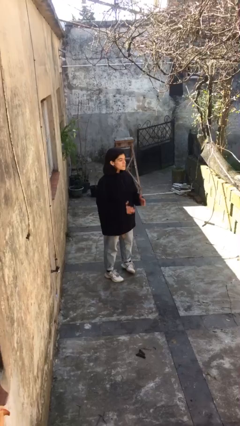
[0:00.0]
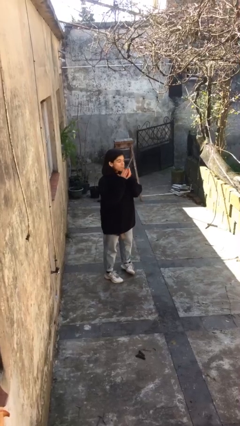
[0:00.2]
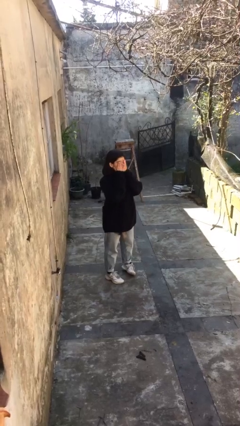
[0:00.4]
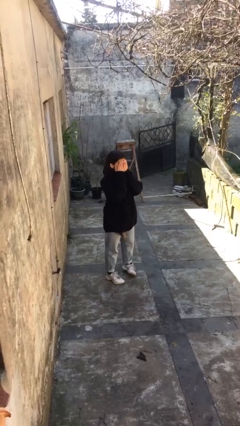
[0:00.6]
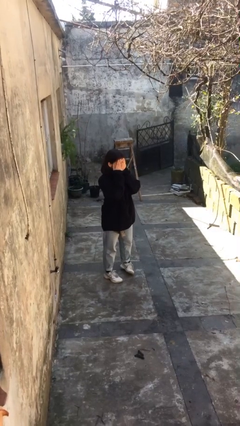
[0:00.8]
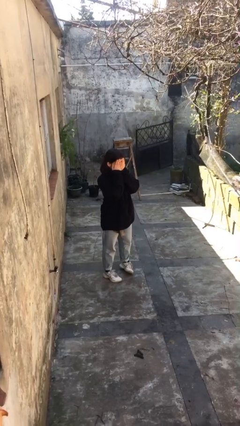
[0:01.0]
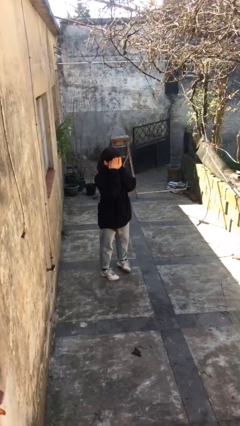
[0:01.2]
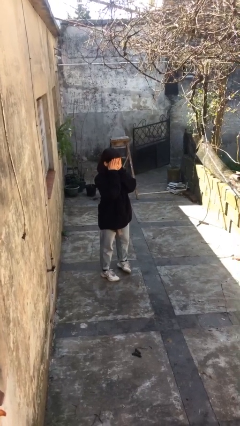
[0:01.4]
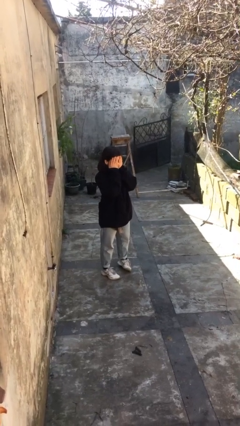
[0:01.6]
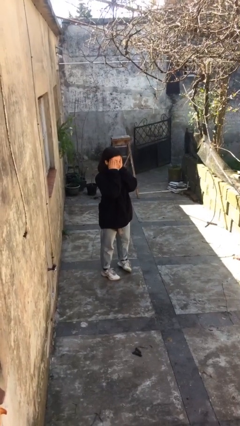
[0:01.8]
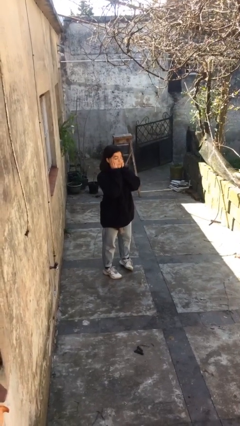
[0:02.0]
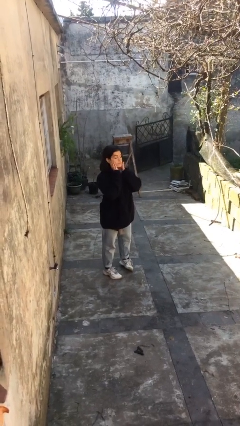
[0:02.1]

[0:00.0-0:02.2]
person covers face with hands

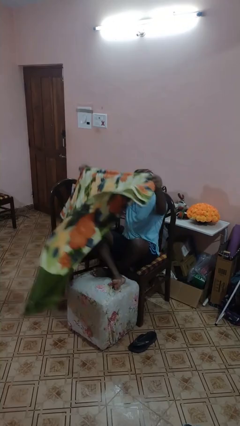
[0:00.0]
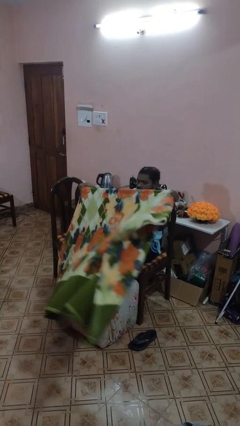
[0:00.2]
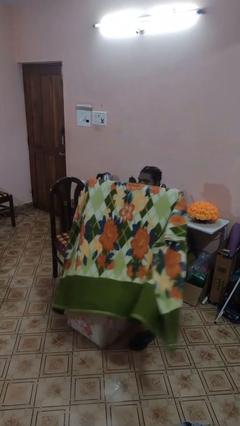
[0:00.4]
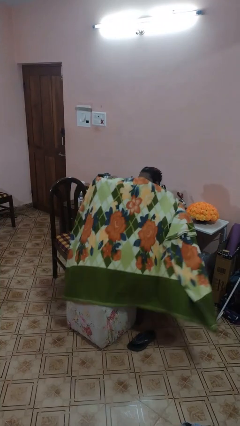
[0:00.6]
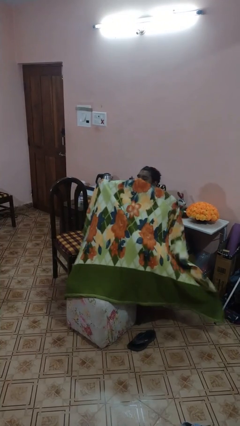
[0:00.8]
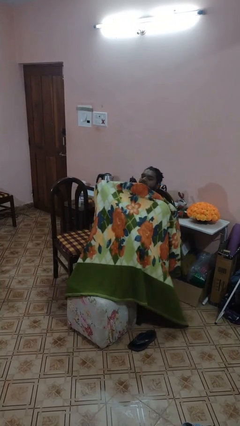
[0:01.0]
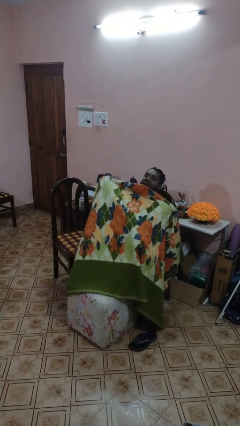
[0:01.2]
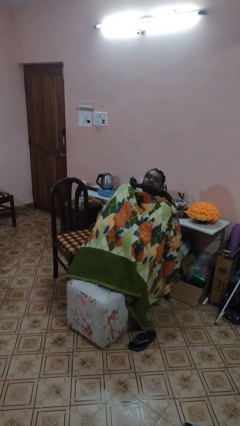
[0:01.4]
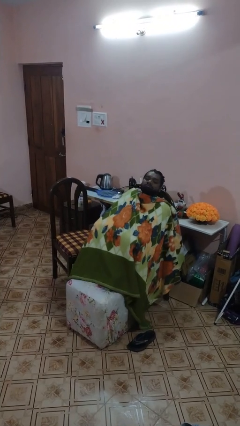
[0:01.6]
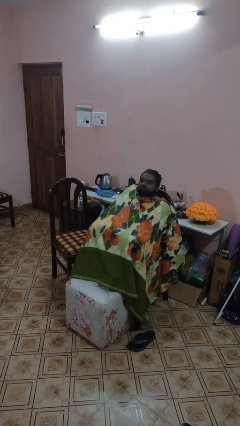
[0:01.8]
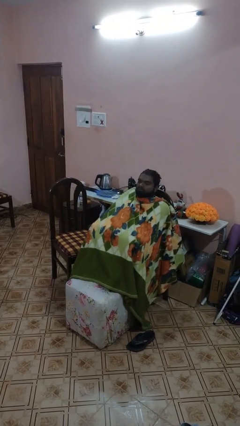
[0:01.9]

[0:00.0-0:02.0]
person covers with blanket

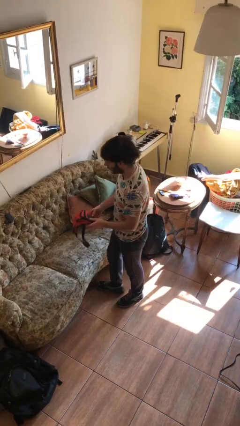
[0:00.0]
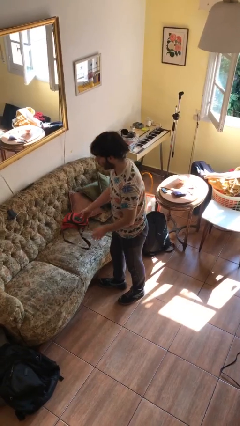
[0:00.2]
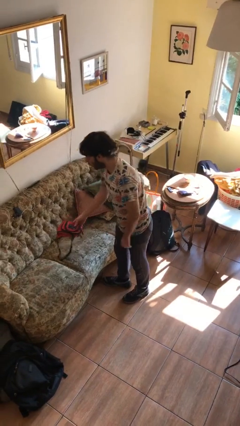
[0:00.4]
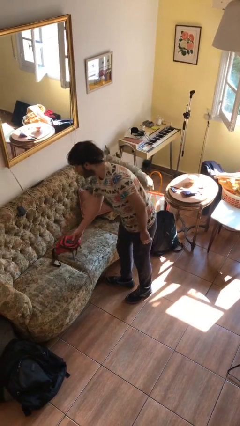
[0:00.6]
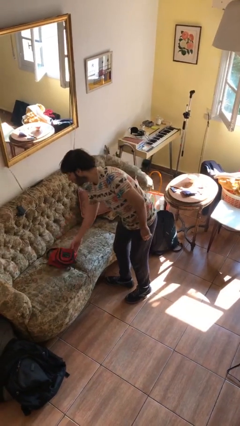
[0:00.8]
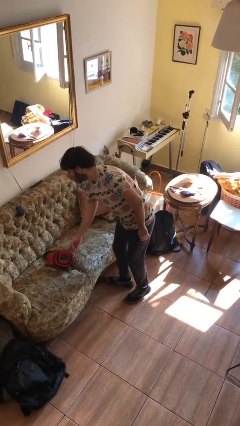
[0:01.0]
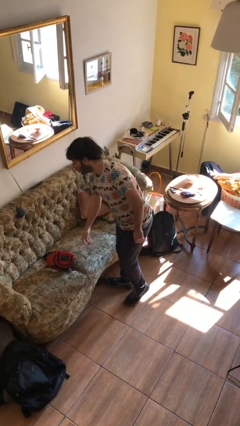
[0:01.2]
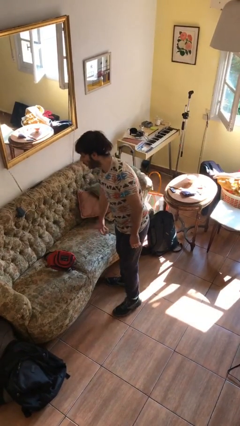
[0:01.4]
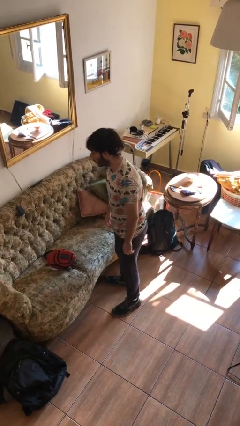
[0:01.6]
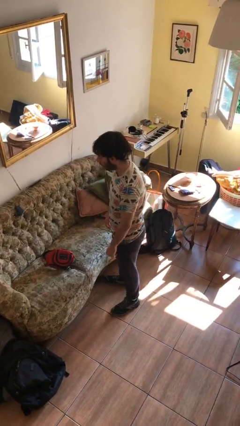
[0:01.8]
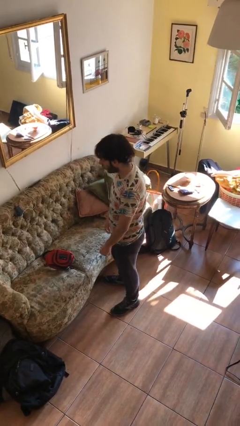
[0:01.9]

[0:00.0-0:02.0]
person puts down object on couch

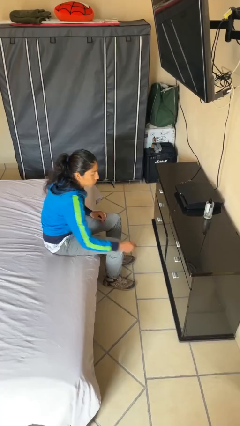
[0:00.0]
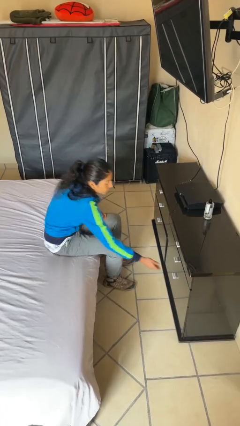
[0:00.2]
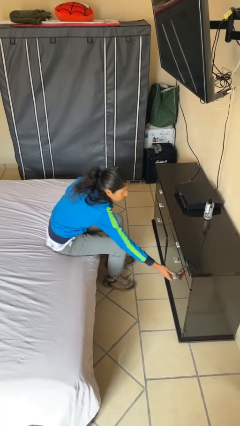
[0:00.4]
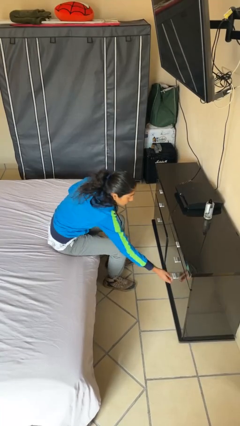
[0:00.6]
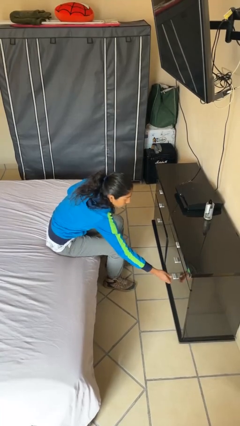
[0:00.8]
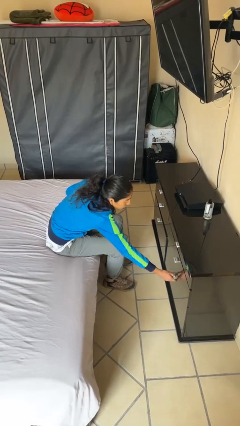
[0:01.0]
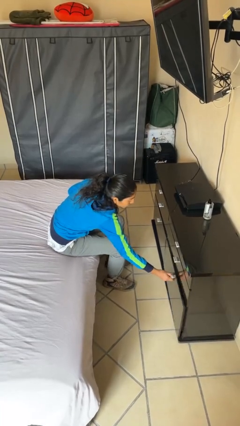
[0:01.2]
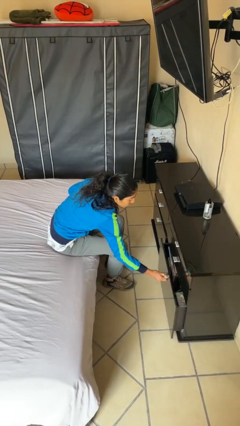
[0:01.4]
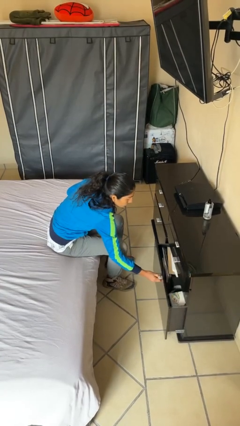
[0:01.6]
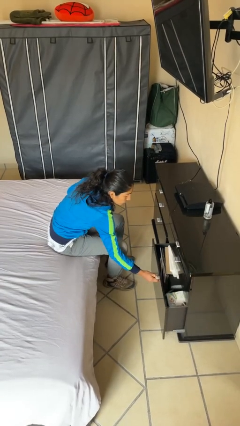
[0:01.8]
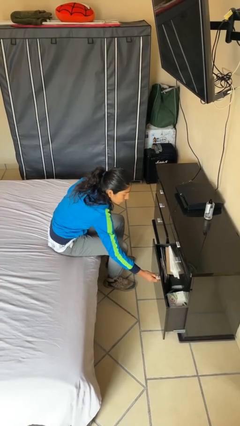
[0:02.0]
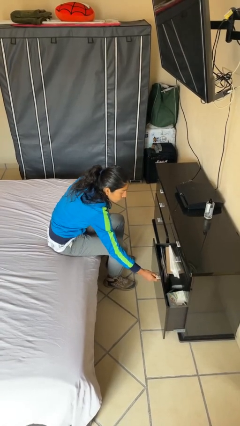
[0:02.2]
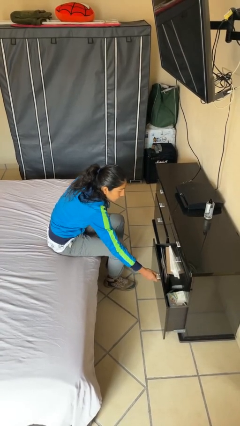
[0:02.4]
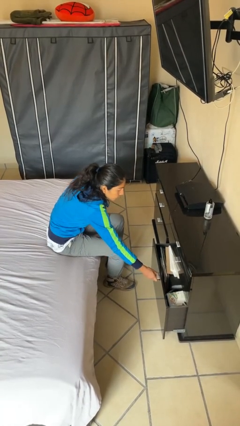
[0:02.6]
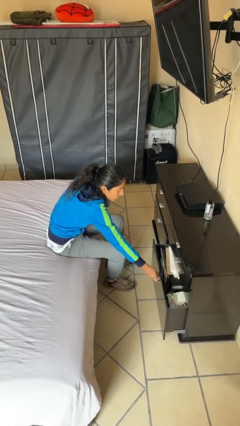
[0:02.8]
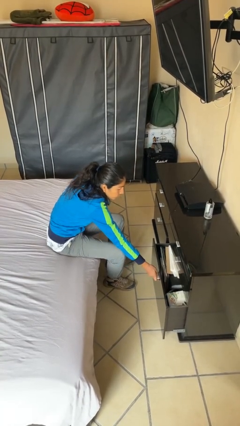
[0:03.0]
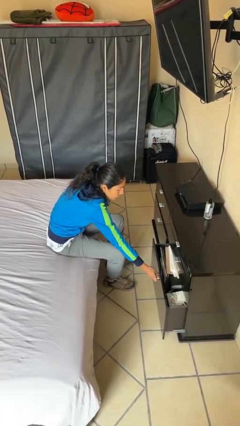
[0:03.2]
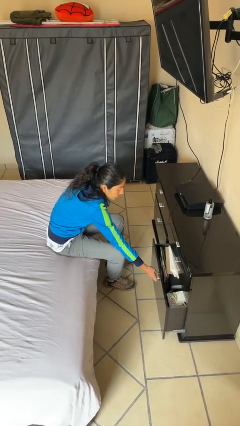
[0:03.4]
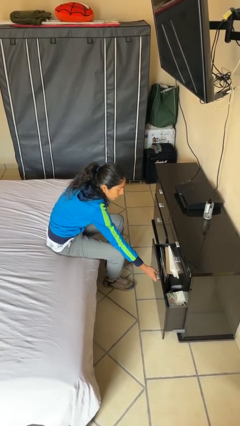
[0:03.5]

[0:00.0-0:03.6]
person opens dresser drawer

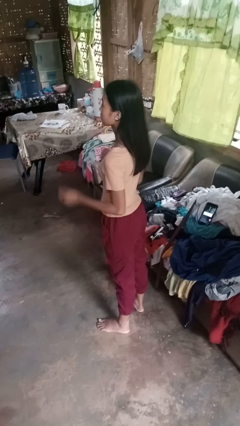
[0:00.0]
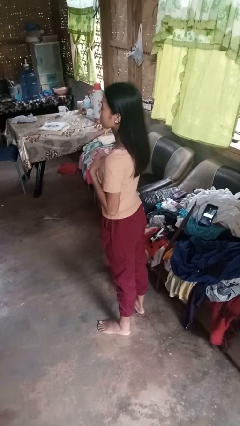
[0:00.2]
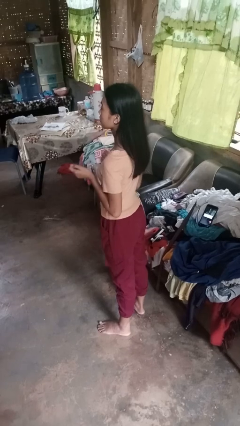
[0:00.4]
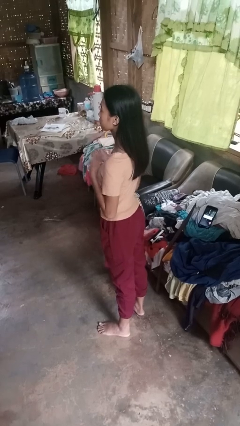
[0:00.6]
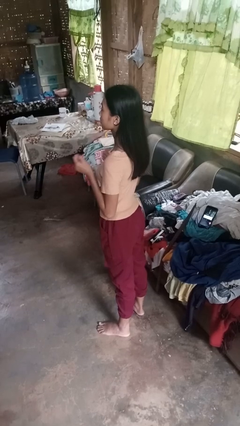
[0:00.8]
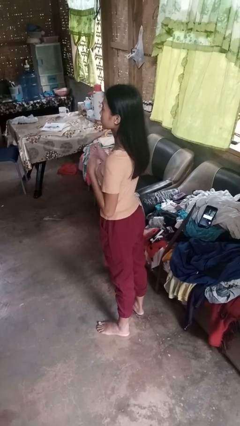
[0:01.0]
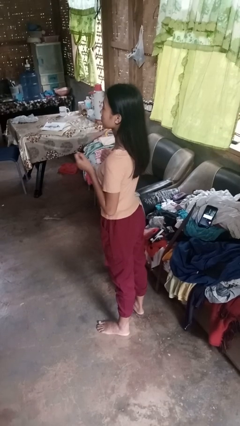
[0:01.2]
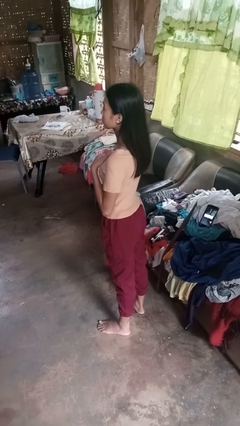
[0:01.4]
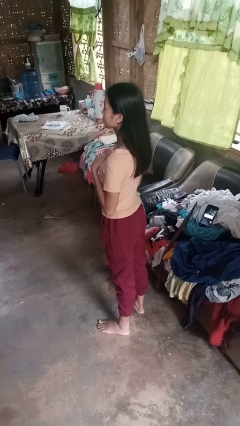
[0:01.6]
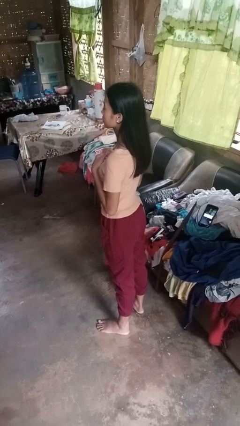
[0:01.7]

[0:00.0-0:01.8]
person drums on chest

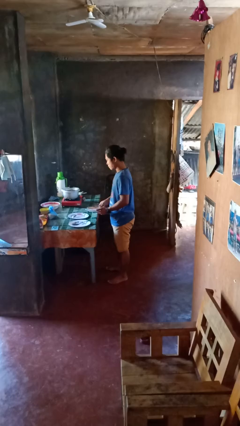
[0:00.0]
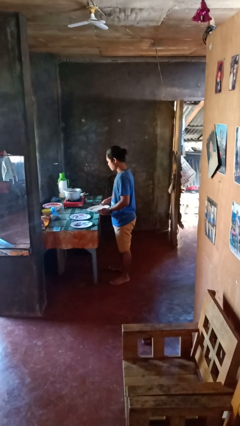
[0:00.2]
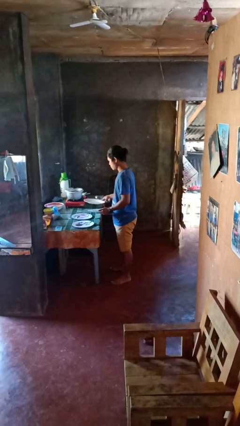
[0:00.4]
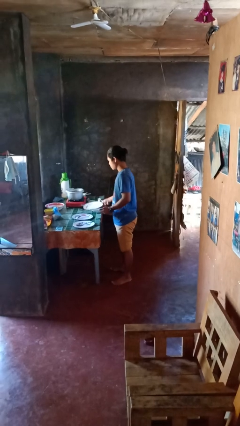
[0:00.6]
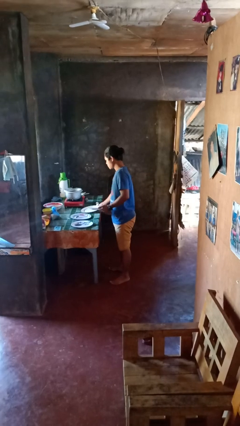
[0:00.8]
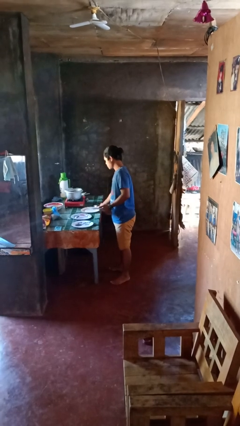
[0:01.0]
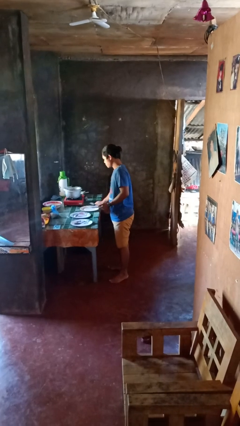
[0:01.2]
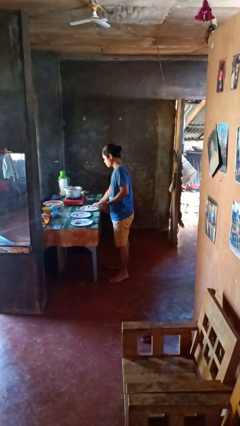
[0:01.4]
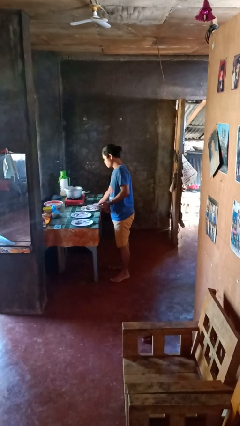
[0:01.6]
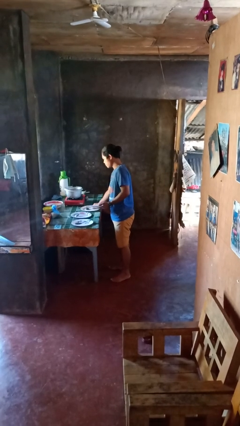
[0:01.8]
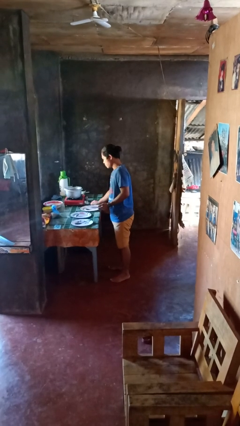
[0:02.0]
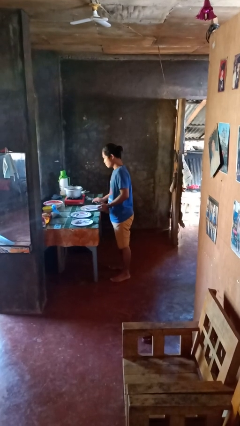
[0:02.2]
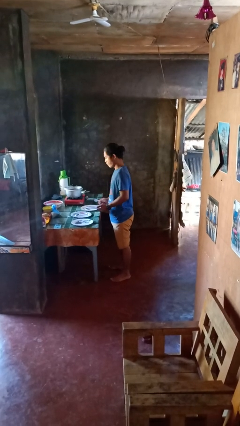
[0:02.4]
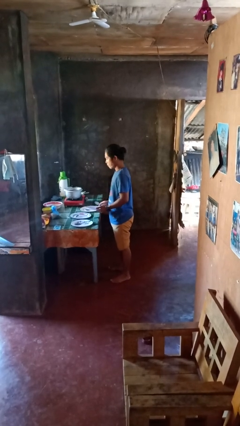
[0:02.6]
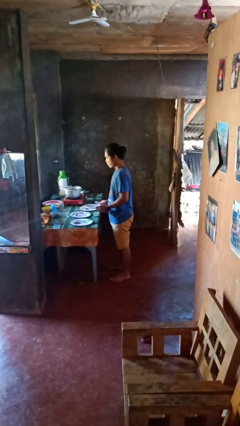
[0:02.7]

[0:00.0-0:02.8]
person sets table

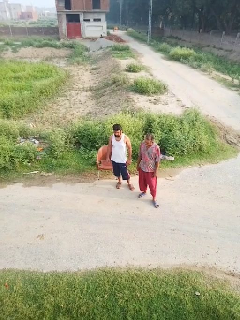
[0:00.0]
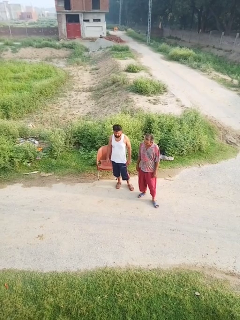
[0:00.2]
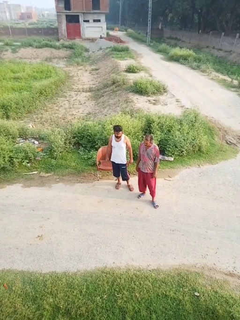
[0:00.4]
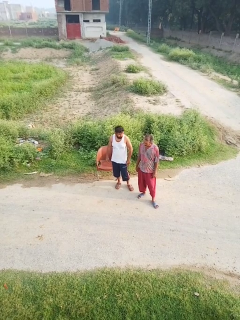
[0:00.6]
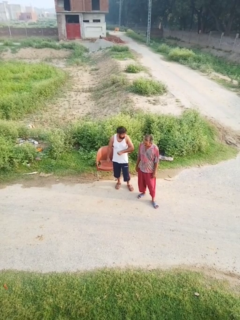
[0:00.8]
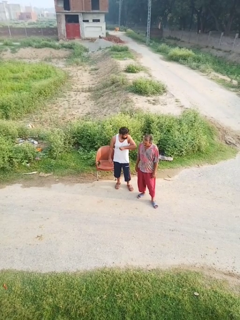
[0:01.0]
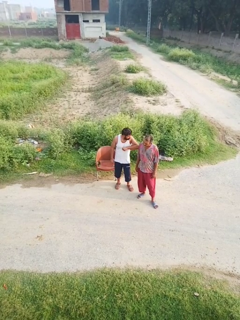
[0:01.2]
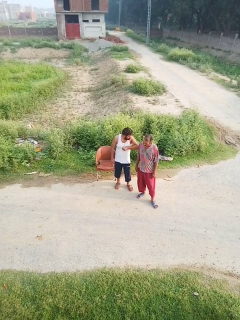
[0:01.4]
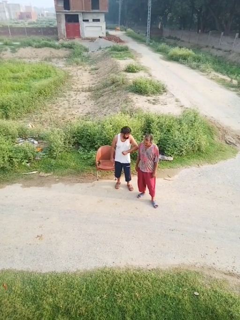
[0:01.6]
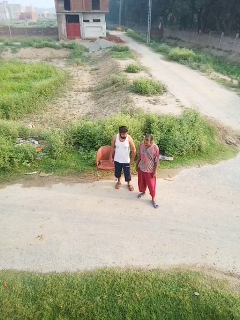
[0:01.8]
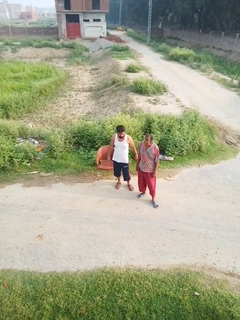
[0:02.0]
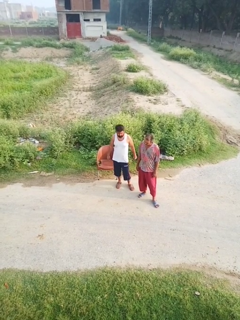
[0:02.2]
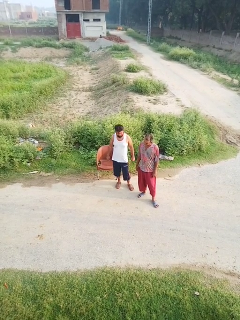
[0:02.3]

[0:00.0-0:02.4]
person nudges person with elbow

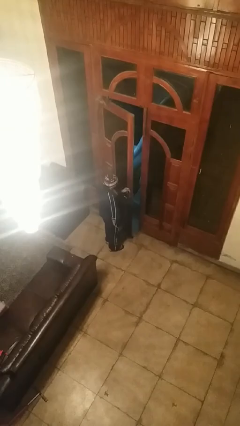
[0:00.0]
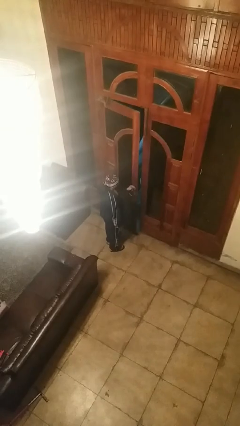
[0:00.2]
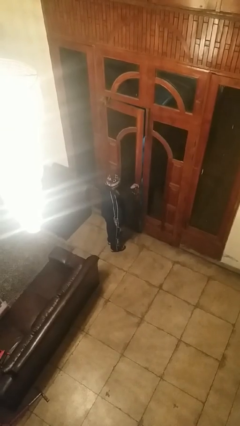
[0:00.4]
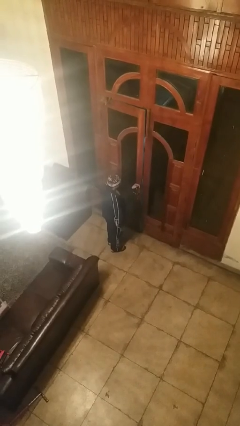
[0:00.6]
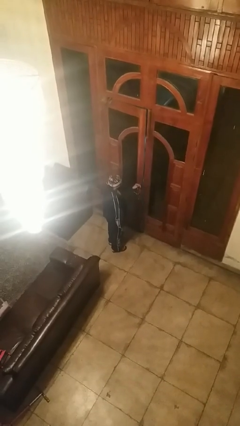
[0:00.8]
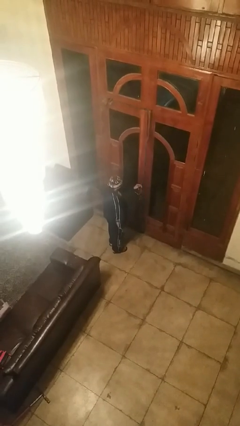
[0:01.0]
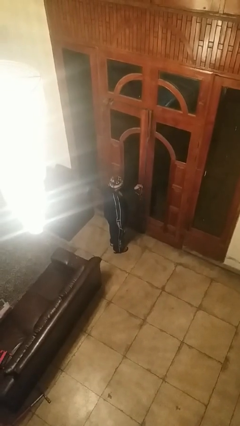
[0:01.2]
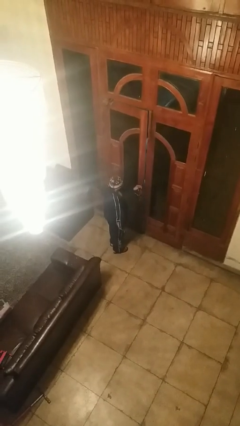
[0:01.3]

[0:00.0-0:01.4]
person closes facility door
